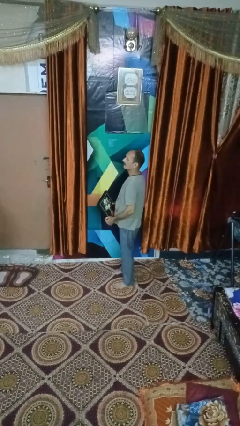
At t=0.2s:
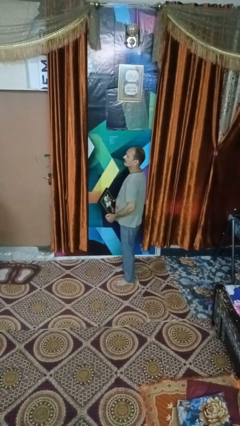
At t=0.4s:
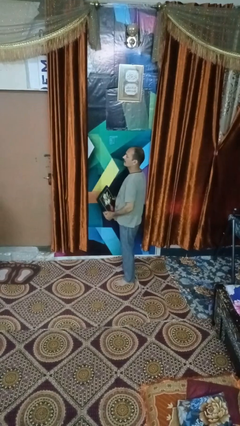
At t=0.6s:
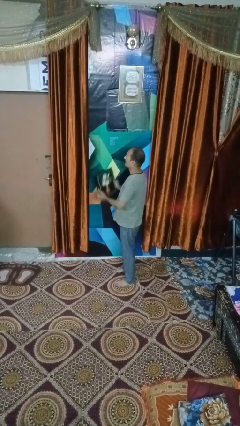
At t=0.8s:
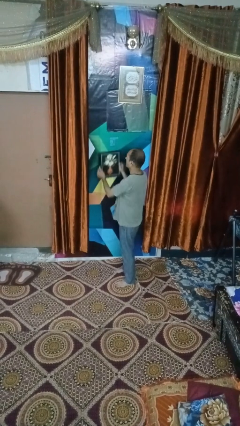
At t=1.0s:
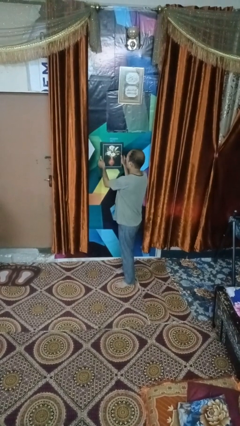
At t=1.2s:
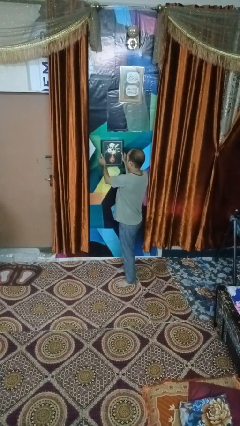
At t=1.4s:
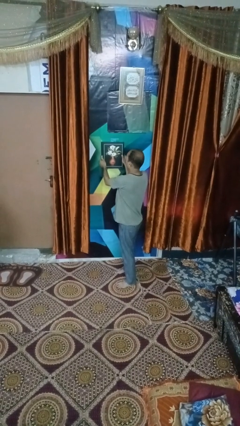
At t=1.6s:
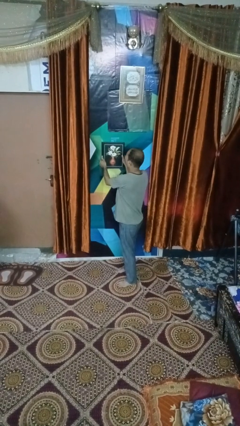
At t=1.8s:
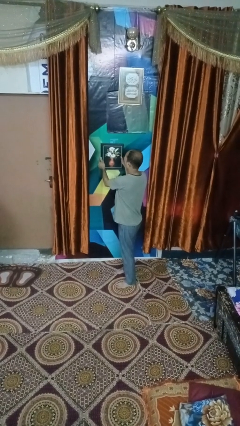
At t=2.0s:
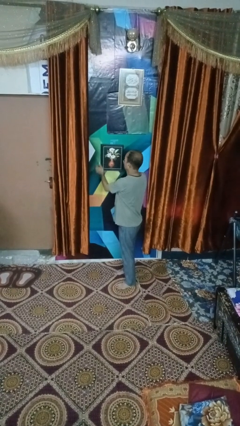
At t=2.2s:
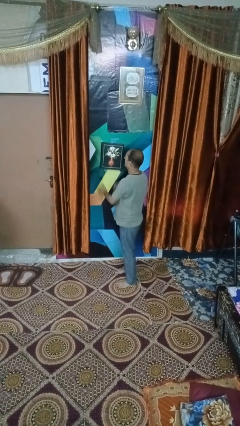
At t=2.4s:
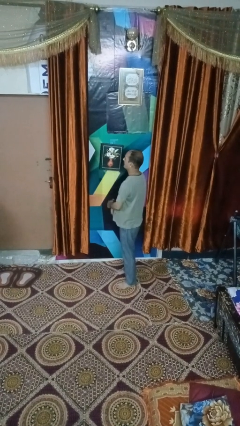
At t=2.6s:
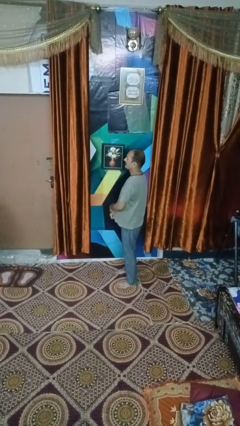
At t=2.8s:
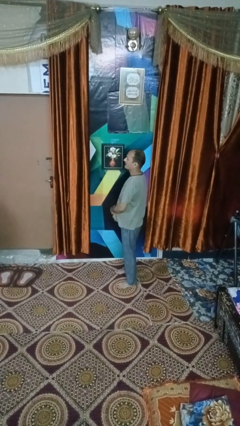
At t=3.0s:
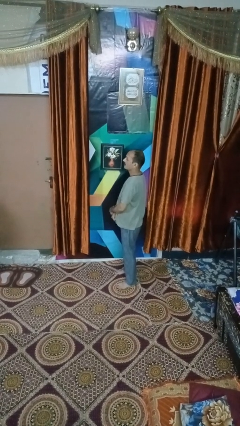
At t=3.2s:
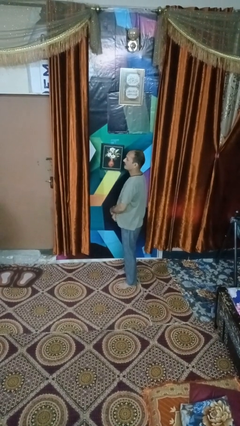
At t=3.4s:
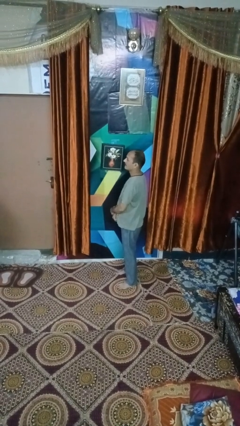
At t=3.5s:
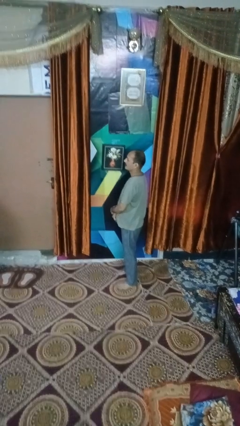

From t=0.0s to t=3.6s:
person puts up picture frame

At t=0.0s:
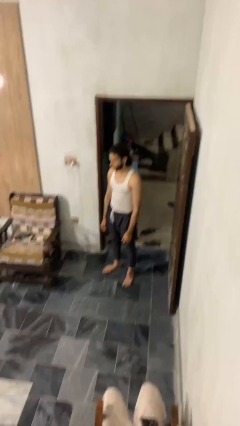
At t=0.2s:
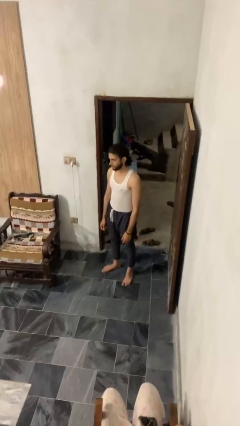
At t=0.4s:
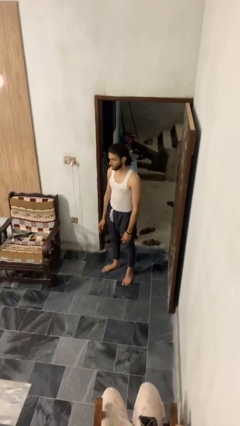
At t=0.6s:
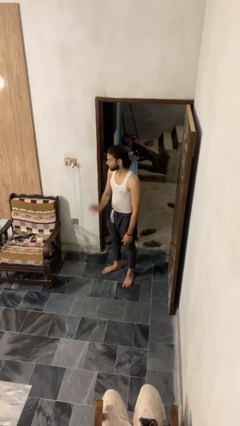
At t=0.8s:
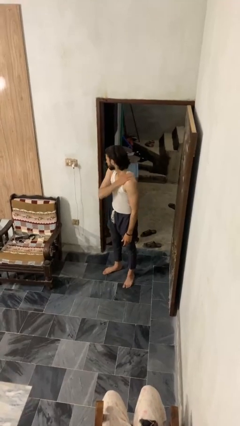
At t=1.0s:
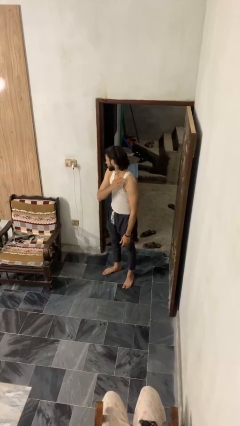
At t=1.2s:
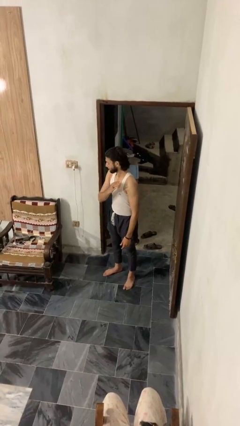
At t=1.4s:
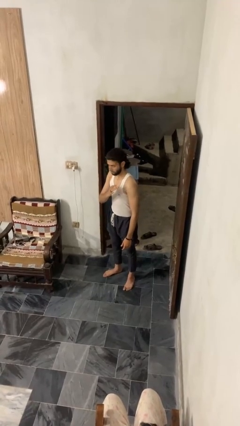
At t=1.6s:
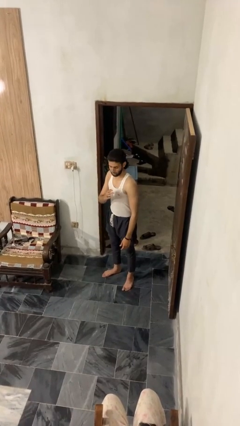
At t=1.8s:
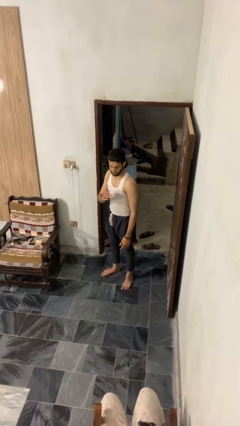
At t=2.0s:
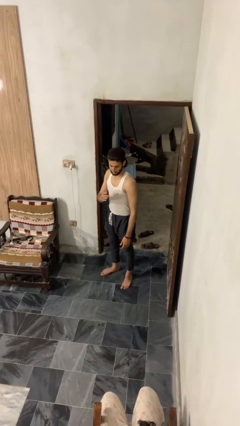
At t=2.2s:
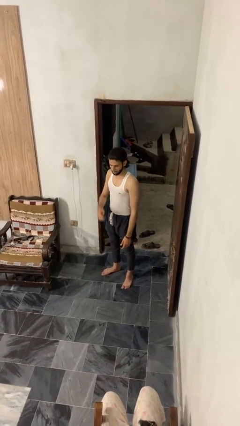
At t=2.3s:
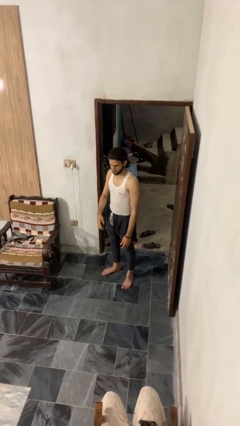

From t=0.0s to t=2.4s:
person swats bug

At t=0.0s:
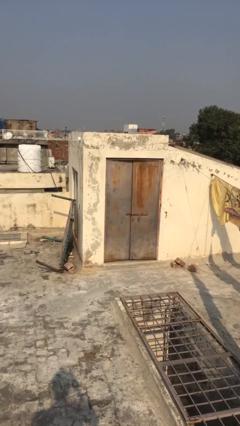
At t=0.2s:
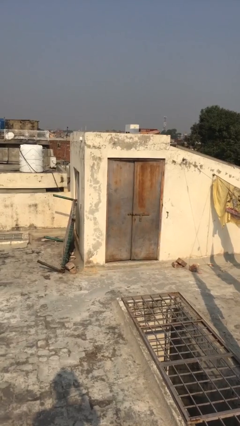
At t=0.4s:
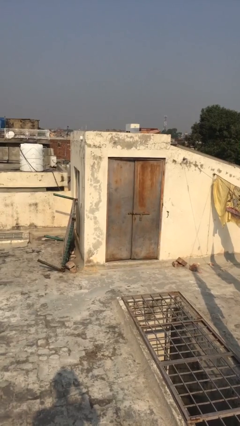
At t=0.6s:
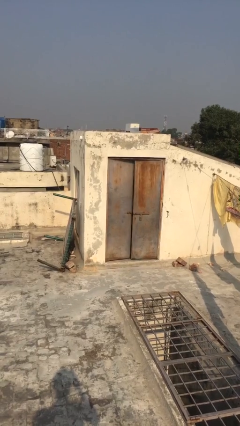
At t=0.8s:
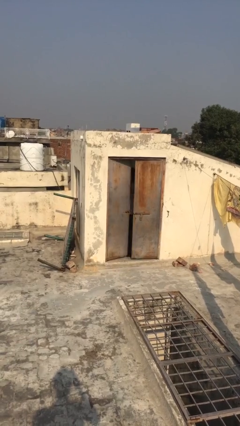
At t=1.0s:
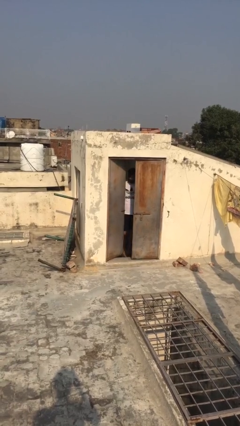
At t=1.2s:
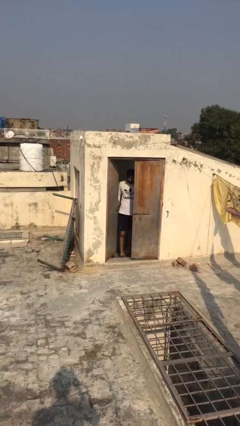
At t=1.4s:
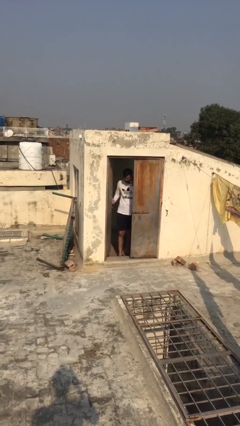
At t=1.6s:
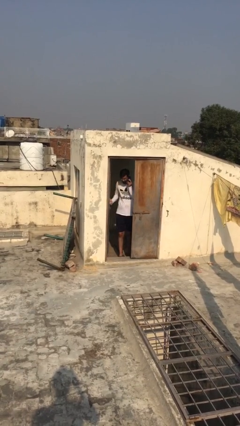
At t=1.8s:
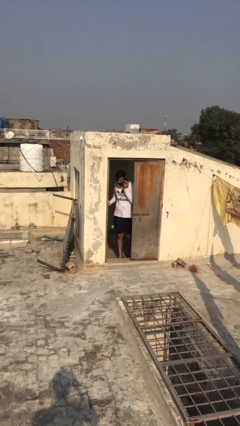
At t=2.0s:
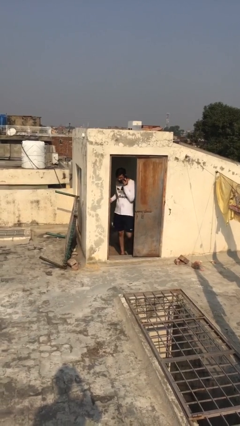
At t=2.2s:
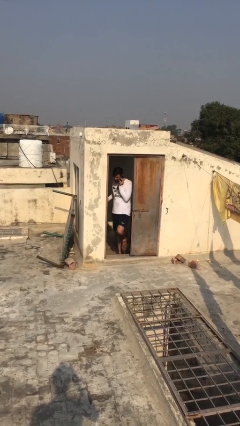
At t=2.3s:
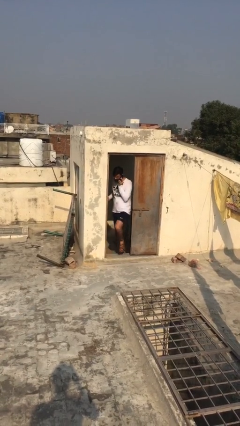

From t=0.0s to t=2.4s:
person opens facility door

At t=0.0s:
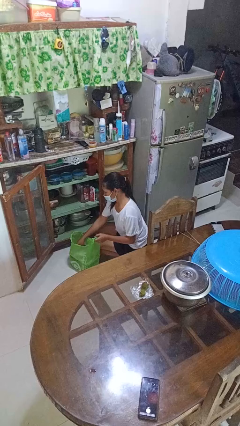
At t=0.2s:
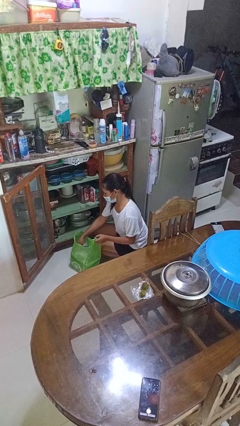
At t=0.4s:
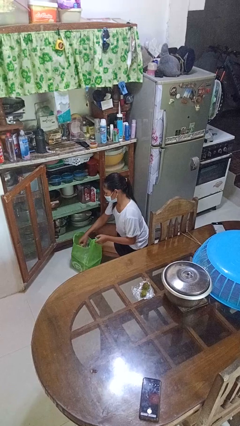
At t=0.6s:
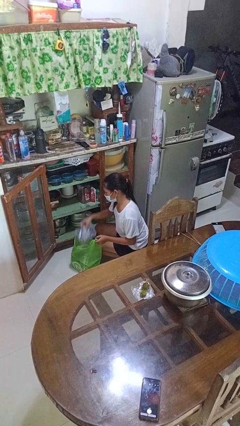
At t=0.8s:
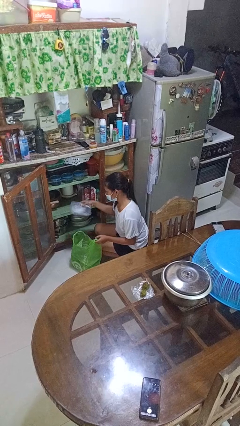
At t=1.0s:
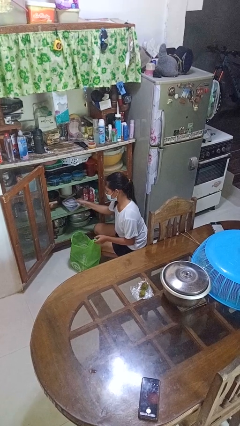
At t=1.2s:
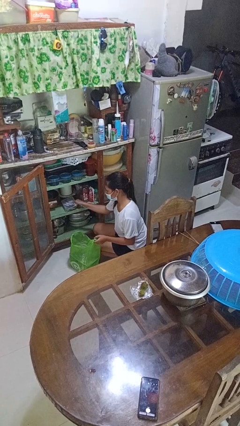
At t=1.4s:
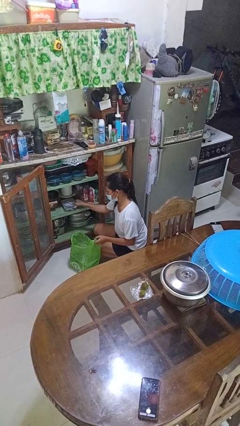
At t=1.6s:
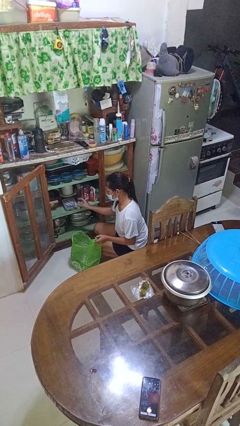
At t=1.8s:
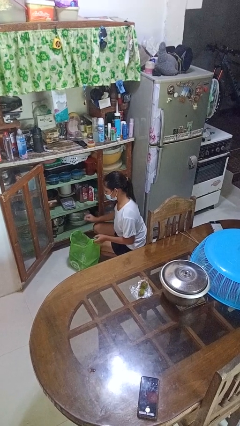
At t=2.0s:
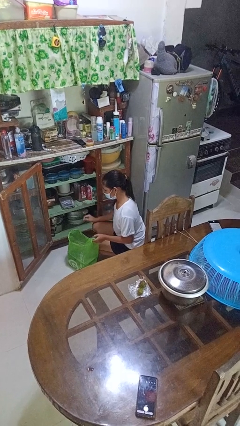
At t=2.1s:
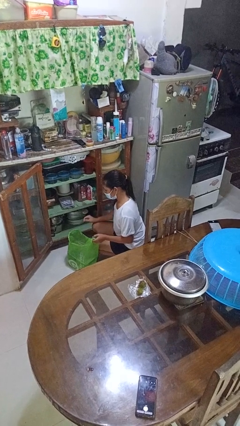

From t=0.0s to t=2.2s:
person loads groceries into cabinet

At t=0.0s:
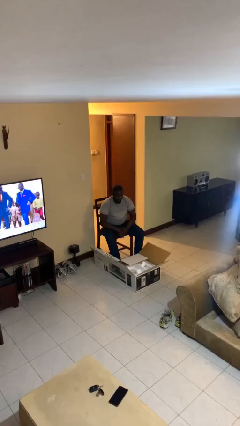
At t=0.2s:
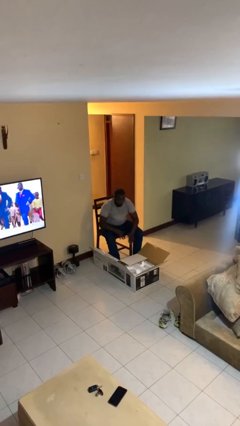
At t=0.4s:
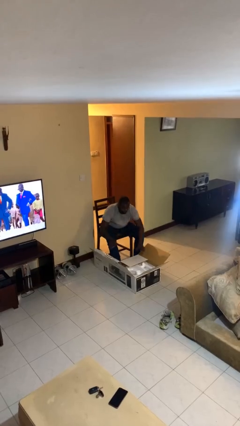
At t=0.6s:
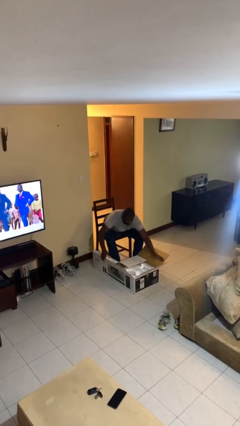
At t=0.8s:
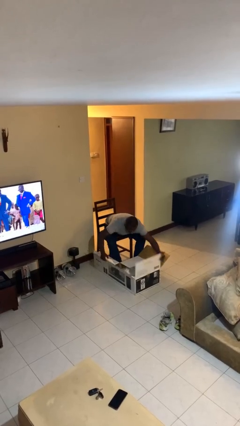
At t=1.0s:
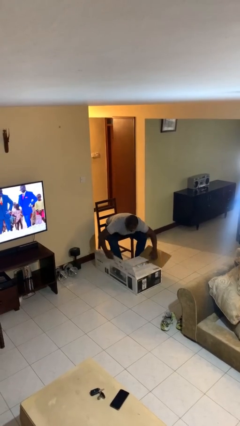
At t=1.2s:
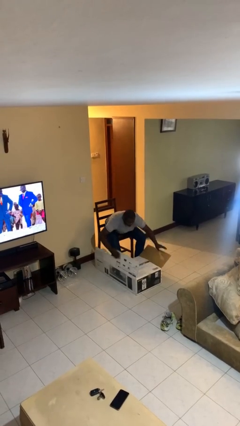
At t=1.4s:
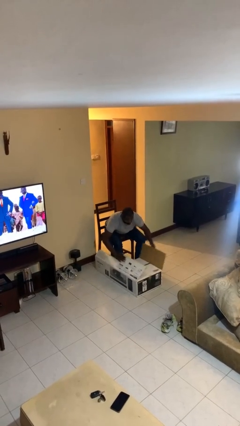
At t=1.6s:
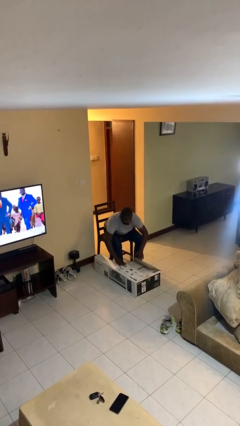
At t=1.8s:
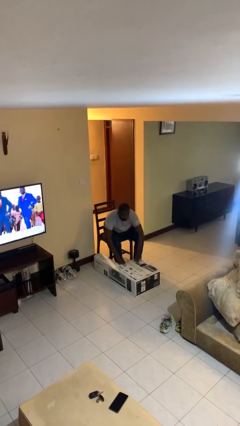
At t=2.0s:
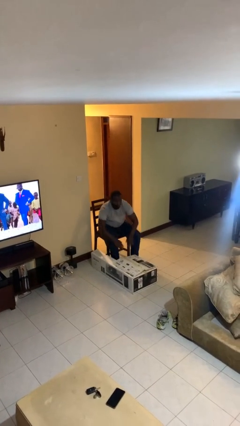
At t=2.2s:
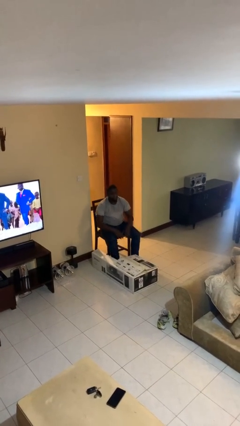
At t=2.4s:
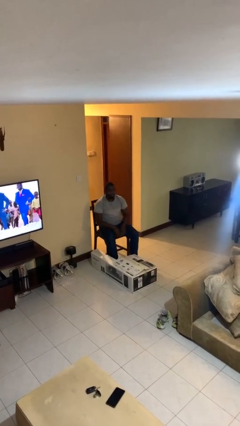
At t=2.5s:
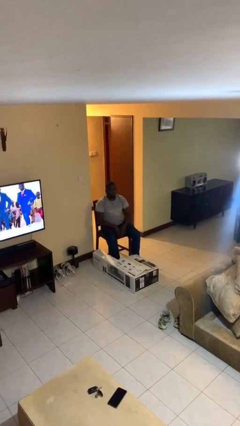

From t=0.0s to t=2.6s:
person closes box

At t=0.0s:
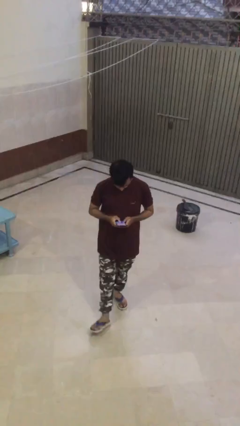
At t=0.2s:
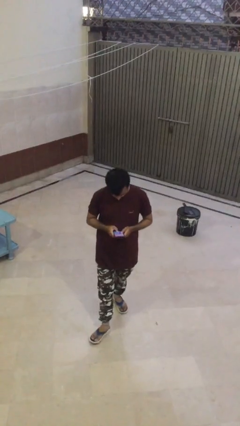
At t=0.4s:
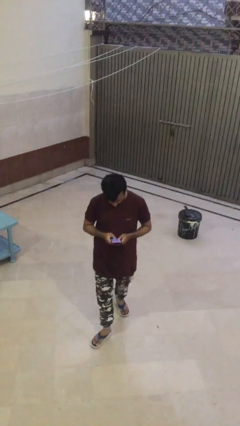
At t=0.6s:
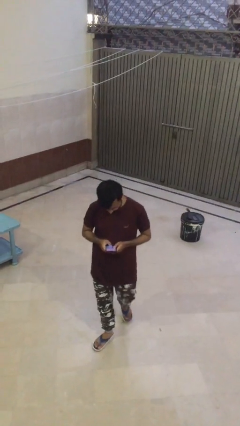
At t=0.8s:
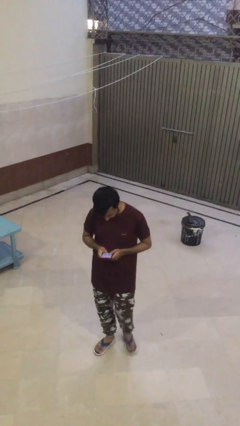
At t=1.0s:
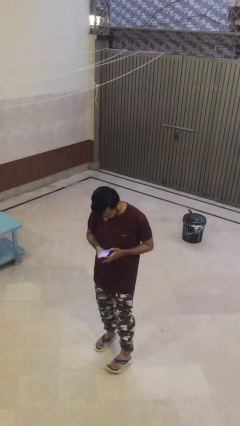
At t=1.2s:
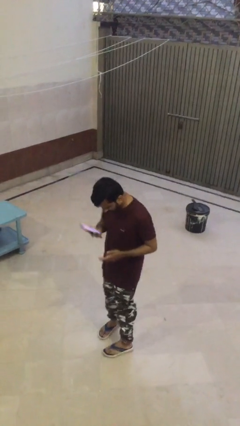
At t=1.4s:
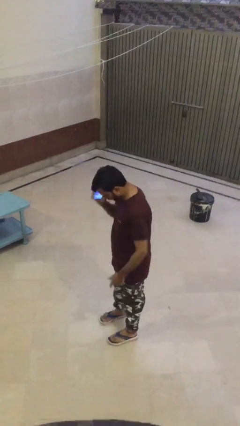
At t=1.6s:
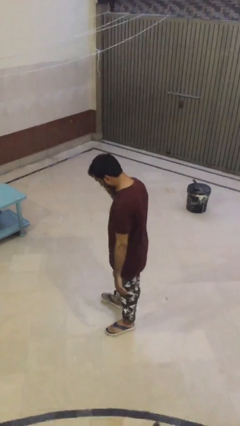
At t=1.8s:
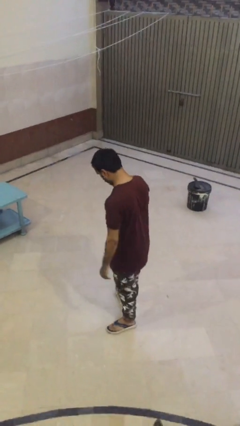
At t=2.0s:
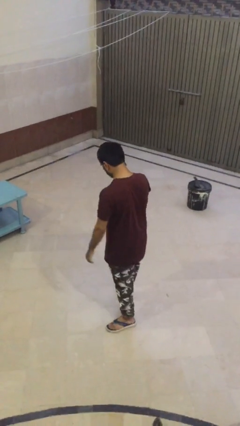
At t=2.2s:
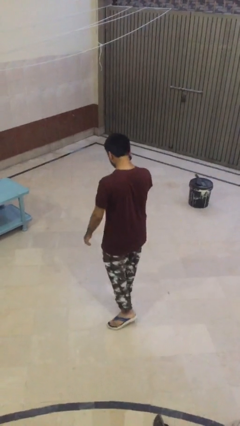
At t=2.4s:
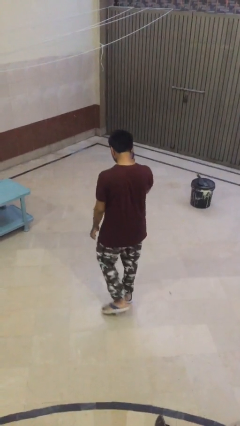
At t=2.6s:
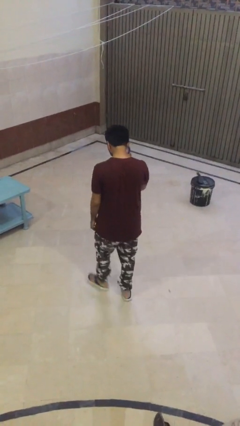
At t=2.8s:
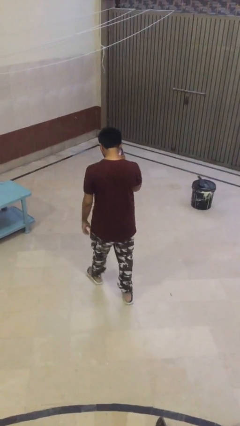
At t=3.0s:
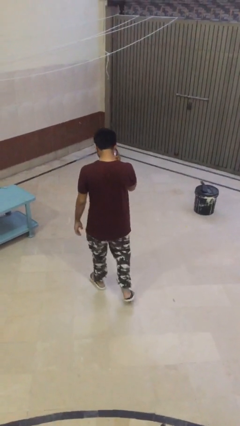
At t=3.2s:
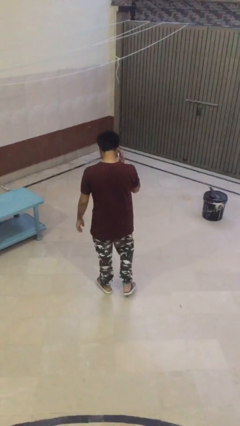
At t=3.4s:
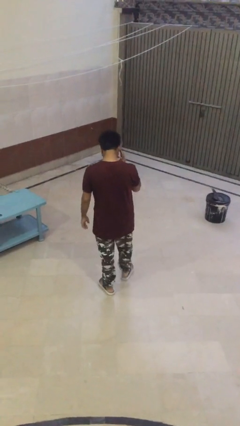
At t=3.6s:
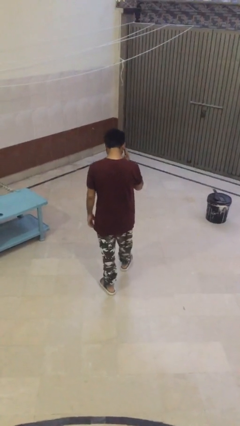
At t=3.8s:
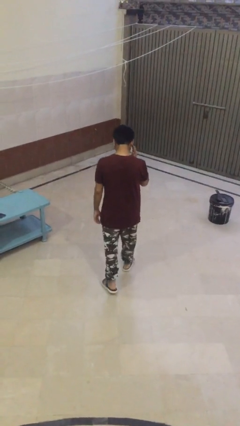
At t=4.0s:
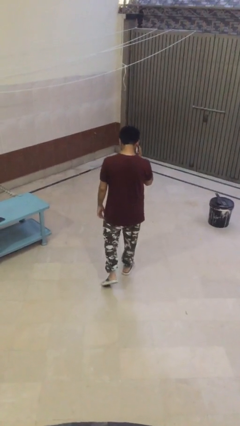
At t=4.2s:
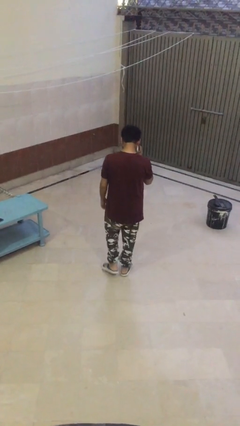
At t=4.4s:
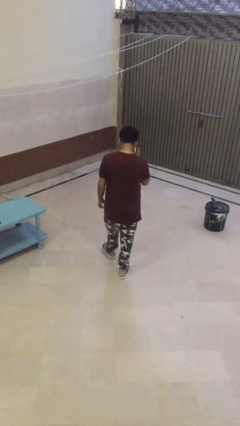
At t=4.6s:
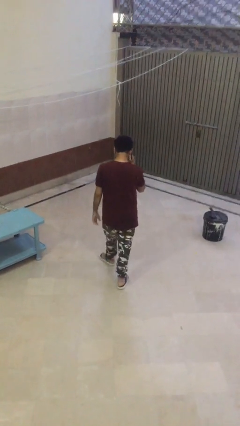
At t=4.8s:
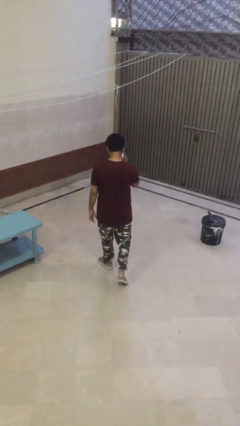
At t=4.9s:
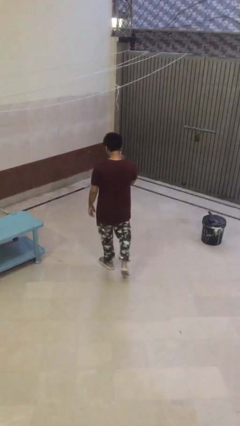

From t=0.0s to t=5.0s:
person talks on phone
